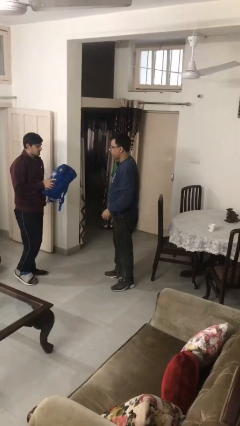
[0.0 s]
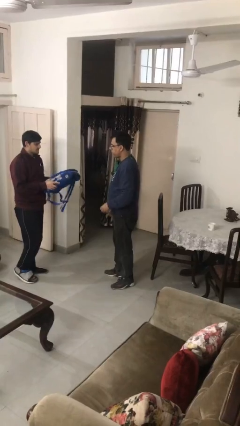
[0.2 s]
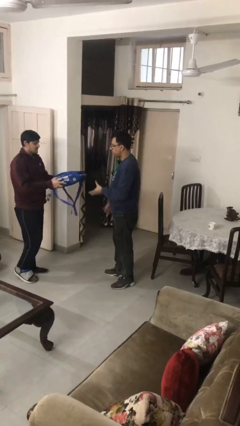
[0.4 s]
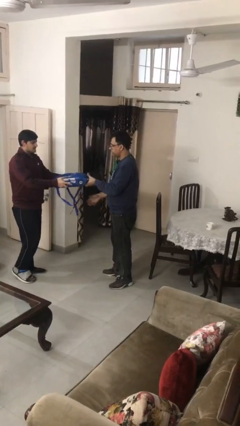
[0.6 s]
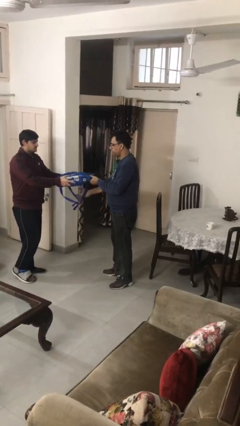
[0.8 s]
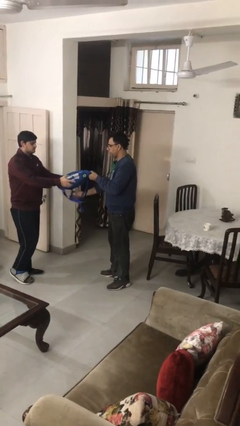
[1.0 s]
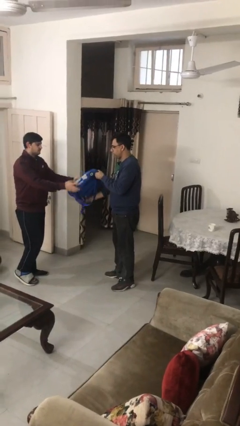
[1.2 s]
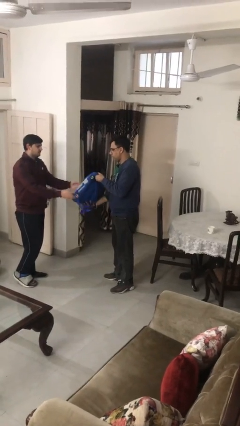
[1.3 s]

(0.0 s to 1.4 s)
person transfers object to person

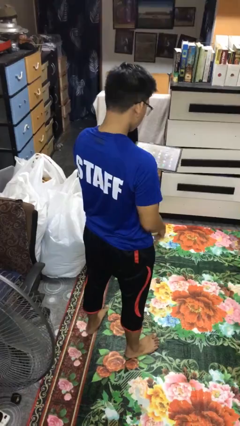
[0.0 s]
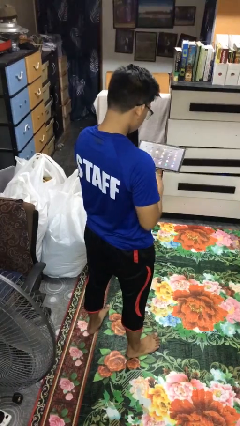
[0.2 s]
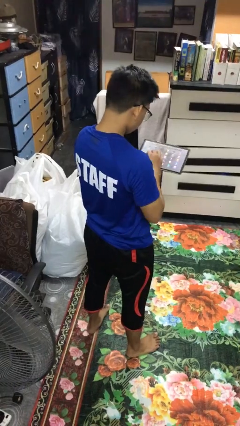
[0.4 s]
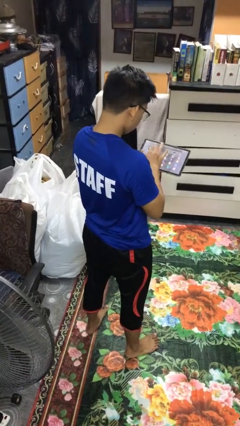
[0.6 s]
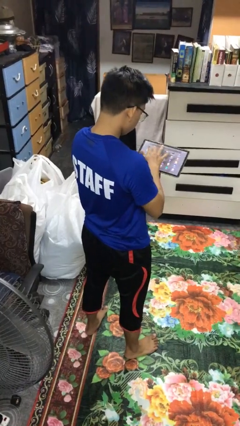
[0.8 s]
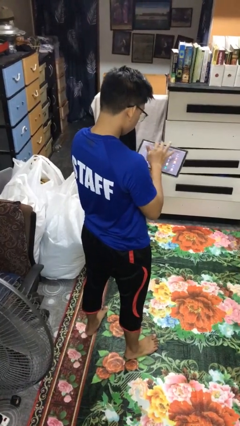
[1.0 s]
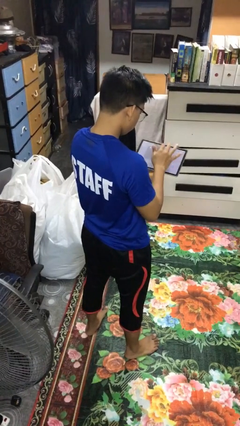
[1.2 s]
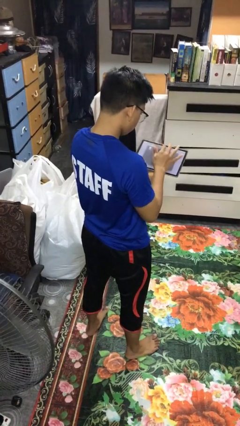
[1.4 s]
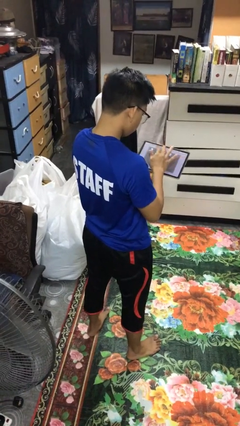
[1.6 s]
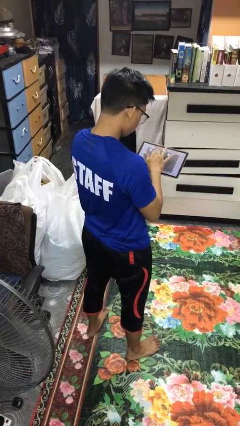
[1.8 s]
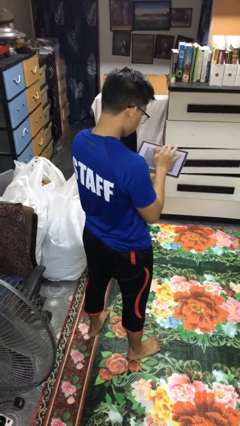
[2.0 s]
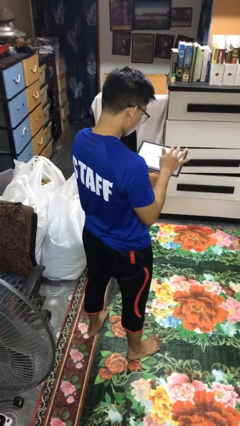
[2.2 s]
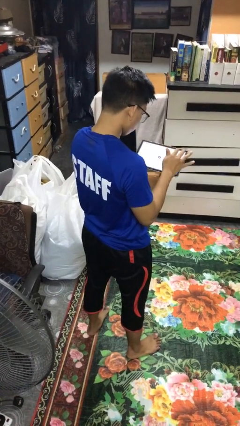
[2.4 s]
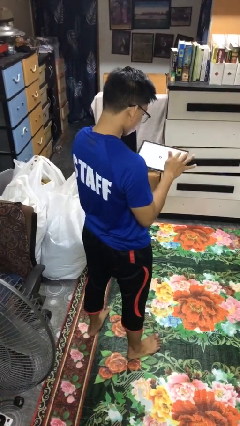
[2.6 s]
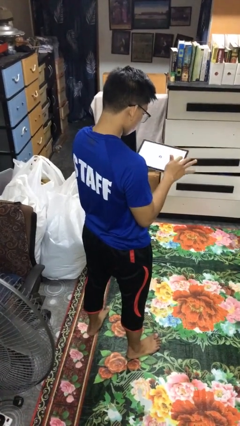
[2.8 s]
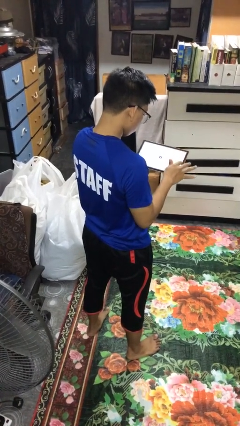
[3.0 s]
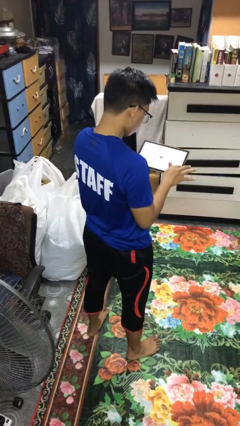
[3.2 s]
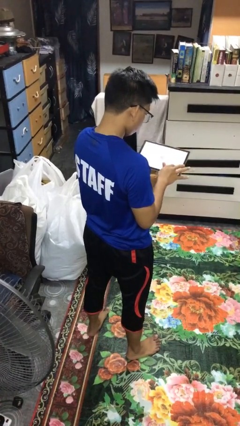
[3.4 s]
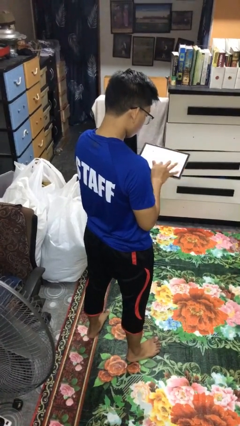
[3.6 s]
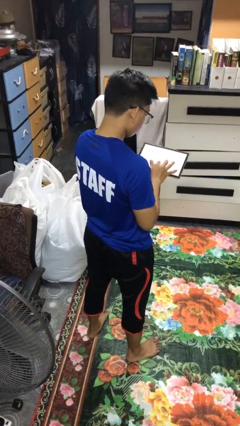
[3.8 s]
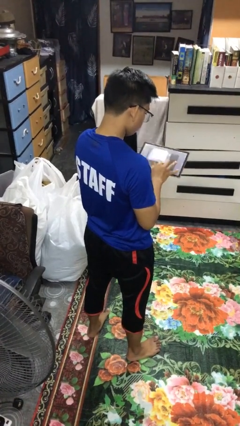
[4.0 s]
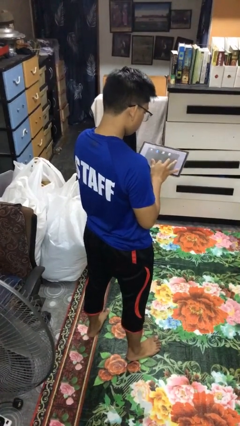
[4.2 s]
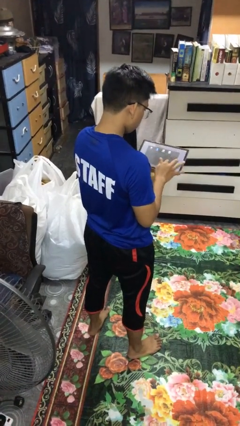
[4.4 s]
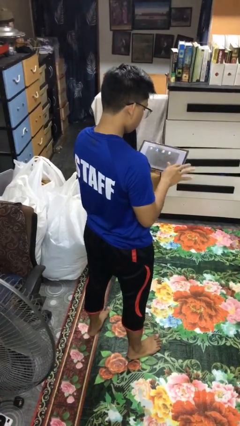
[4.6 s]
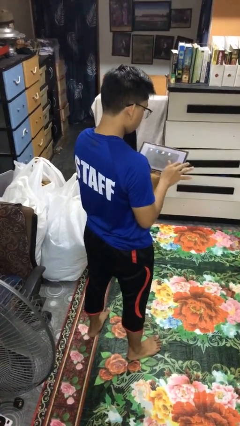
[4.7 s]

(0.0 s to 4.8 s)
person interacts with tablet

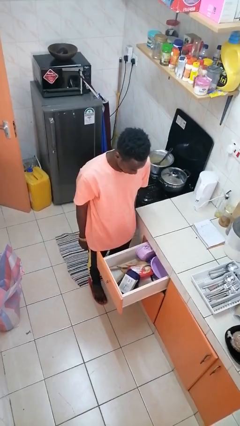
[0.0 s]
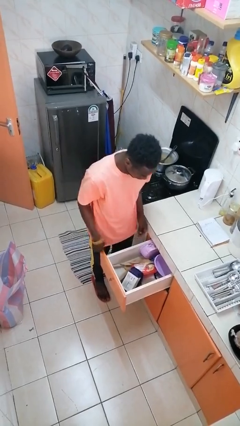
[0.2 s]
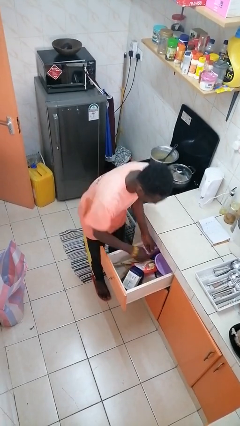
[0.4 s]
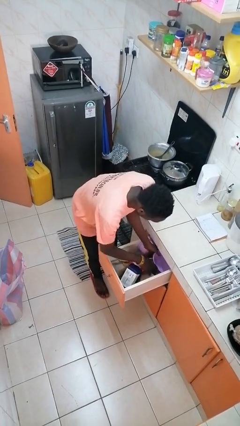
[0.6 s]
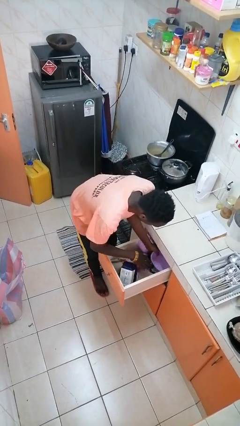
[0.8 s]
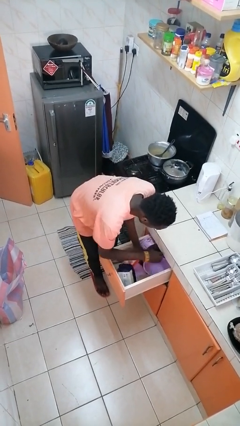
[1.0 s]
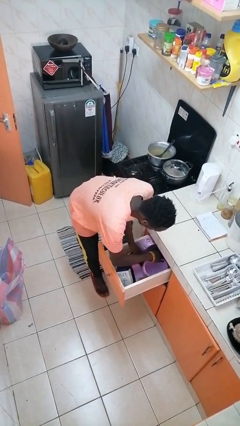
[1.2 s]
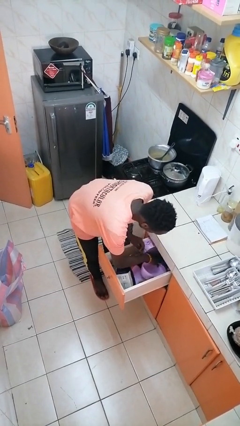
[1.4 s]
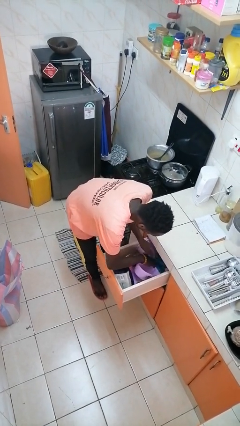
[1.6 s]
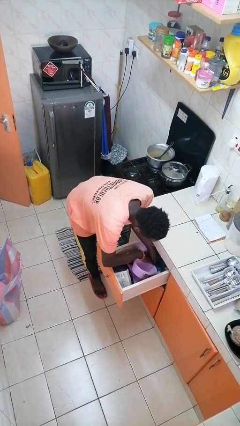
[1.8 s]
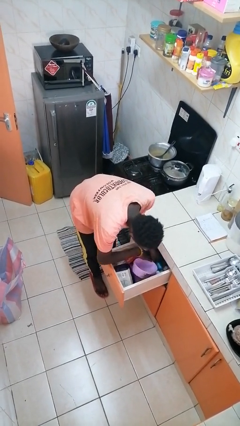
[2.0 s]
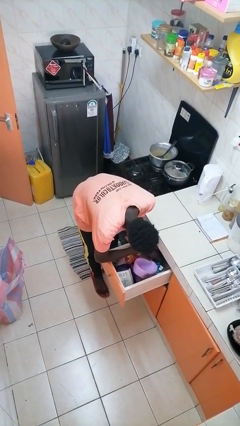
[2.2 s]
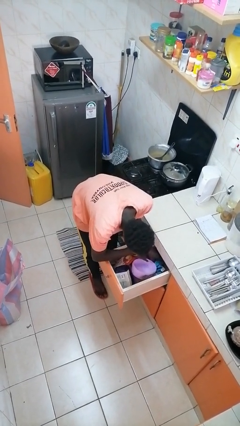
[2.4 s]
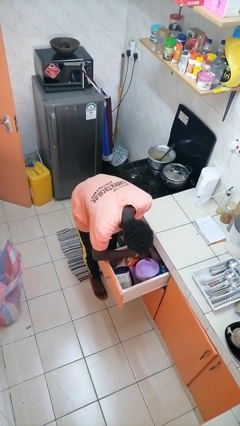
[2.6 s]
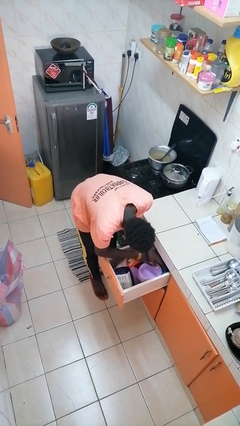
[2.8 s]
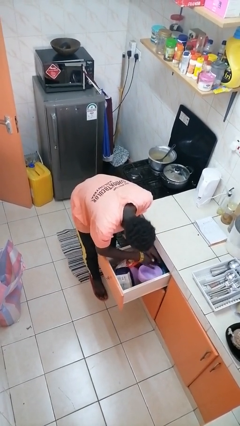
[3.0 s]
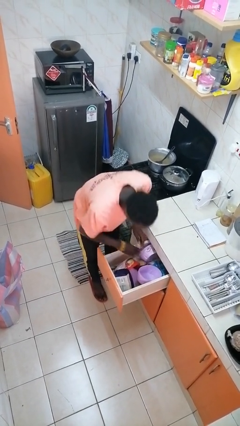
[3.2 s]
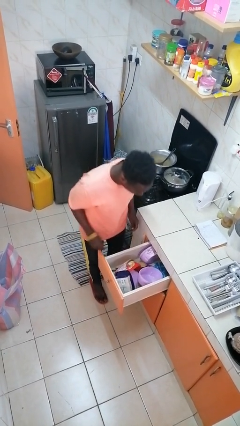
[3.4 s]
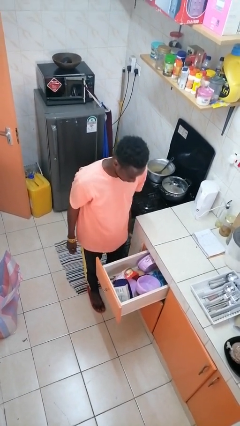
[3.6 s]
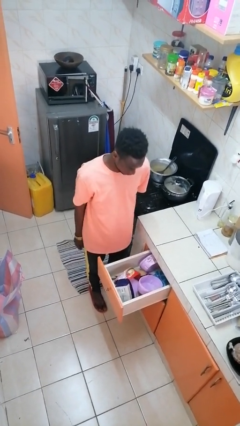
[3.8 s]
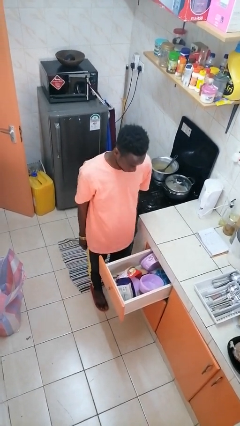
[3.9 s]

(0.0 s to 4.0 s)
person searches in kitchen drawer

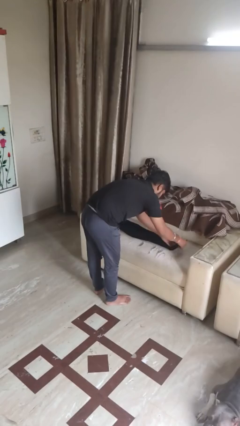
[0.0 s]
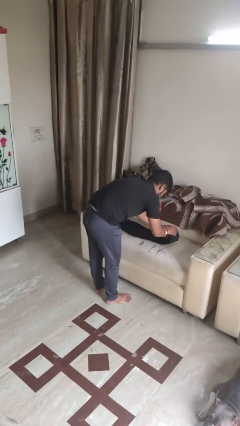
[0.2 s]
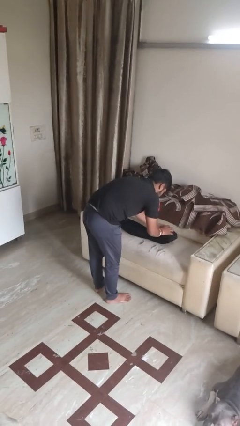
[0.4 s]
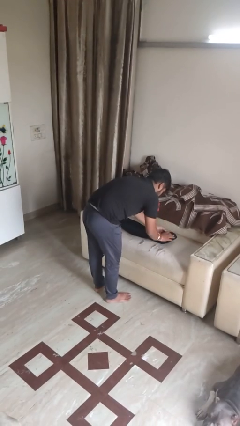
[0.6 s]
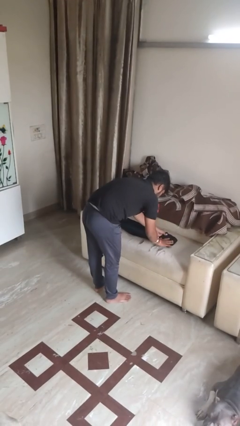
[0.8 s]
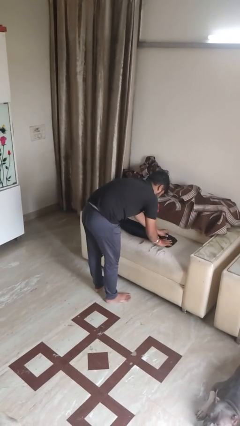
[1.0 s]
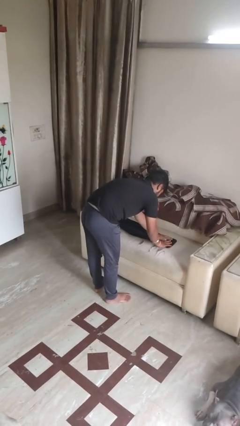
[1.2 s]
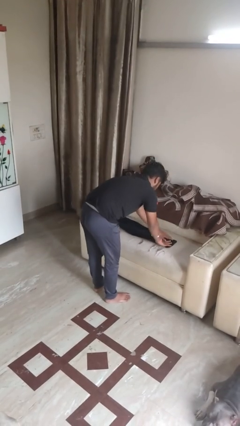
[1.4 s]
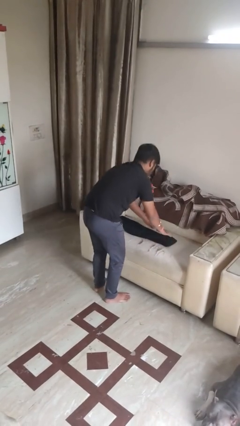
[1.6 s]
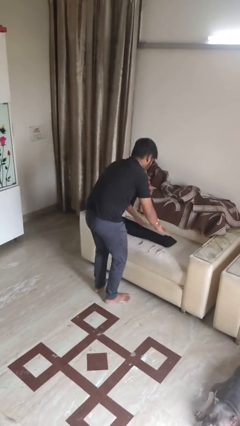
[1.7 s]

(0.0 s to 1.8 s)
person folds pants

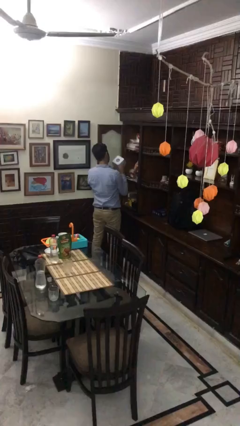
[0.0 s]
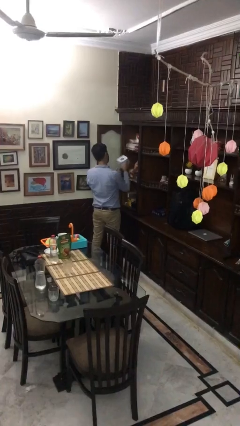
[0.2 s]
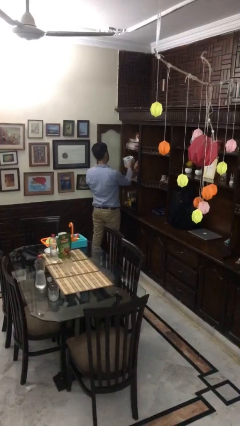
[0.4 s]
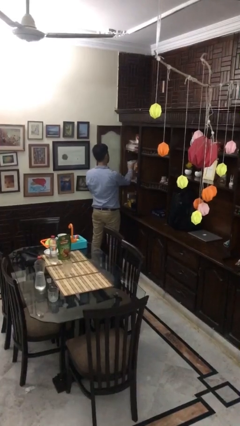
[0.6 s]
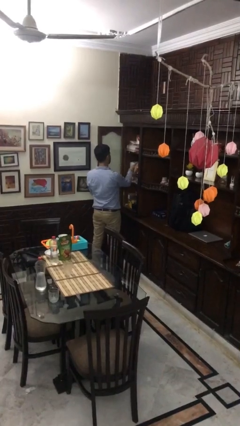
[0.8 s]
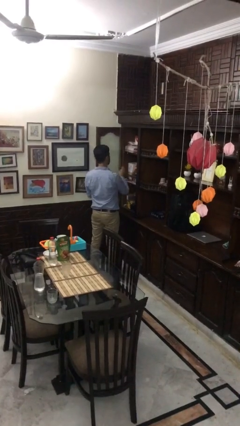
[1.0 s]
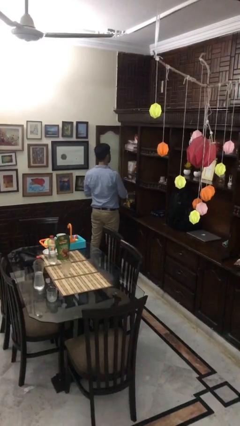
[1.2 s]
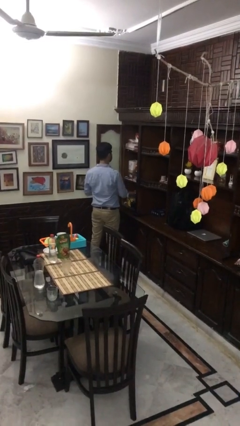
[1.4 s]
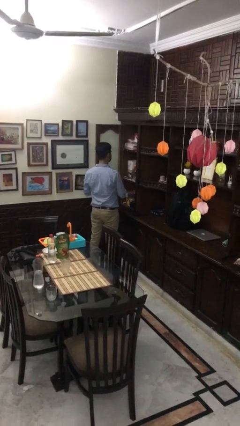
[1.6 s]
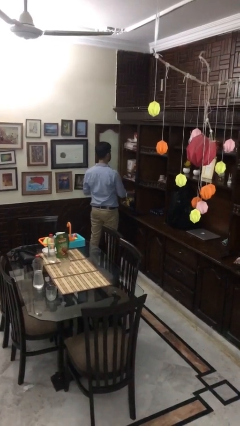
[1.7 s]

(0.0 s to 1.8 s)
person puts down object into cabinet

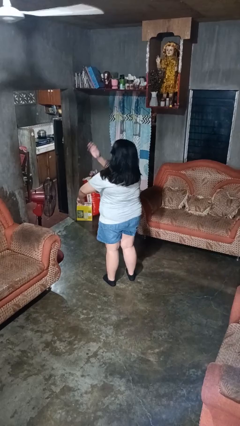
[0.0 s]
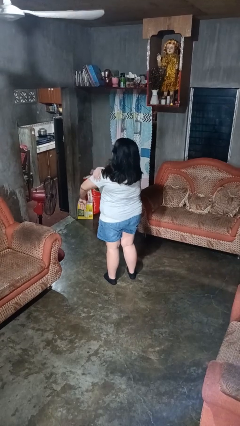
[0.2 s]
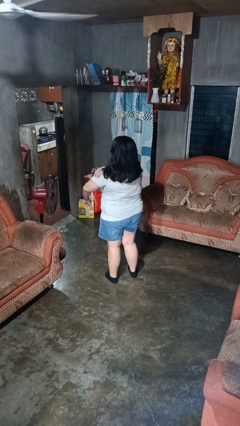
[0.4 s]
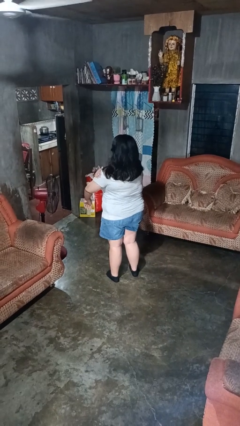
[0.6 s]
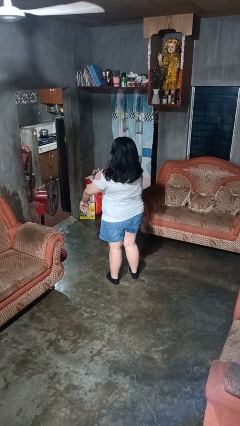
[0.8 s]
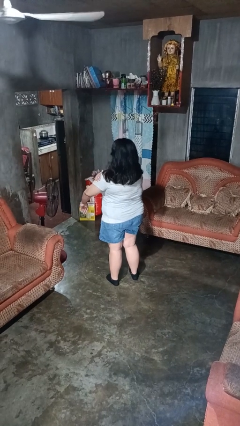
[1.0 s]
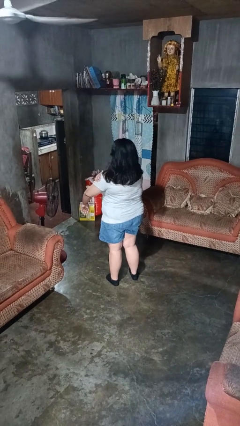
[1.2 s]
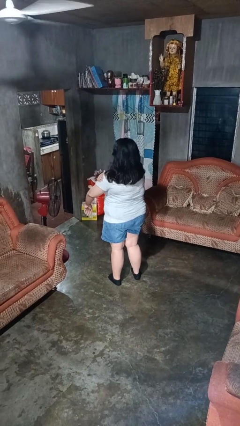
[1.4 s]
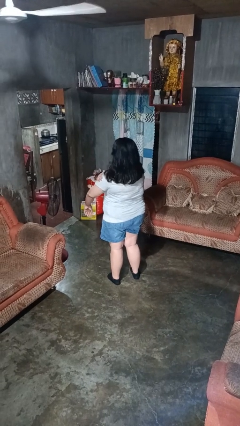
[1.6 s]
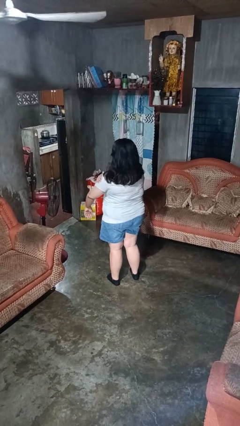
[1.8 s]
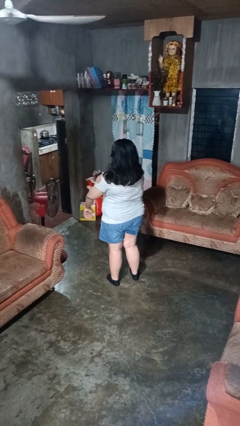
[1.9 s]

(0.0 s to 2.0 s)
person swats bug

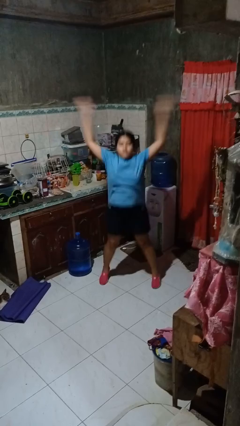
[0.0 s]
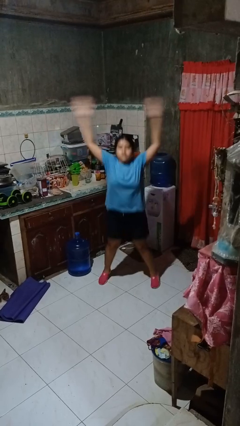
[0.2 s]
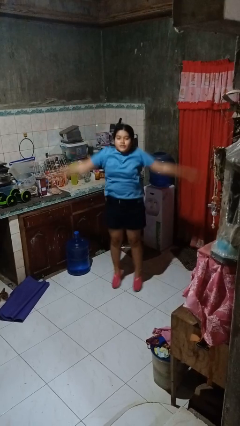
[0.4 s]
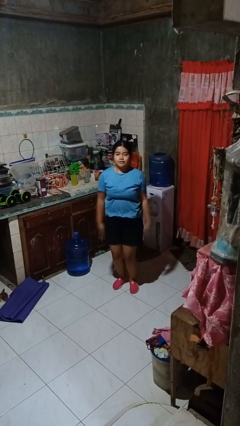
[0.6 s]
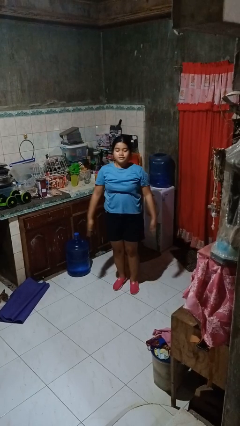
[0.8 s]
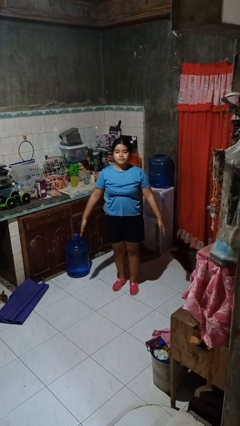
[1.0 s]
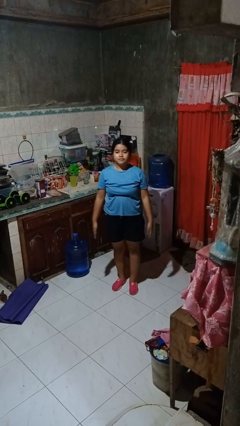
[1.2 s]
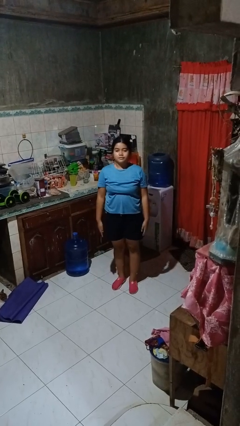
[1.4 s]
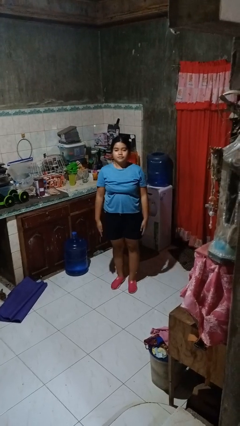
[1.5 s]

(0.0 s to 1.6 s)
person exercises with jumping jacks
